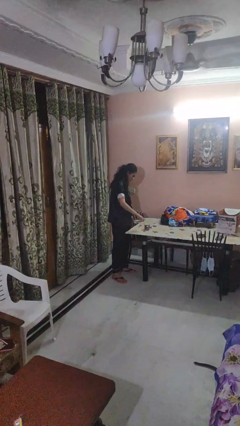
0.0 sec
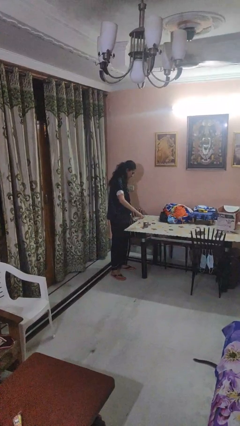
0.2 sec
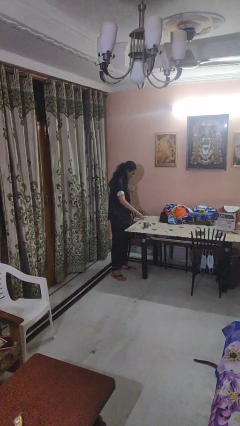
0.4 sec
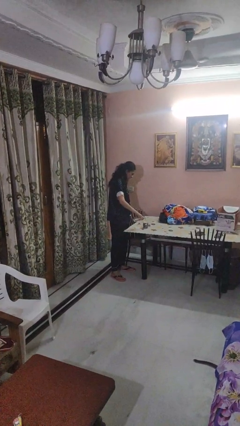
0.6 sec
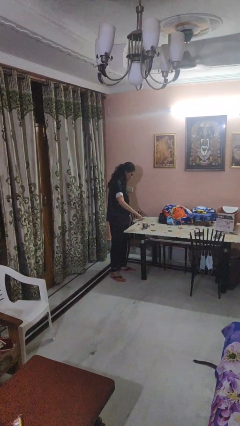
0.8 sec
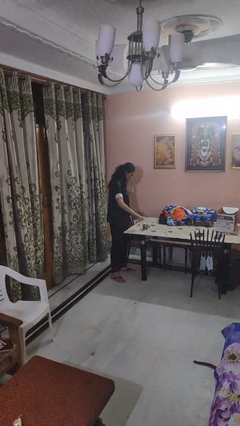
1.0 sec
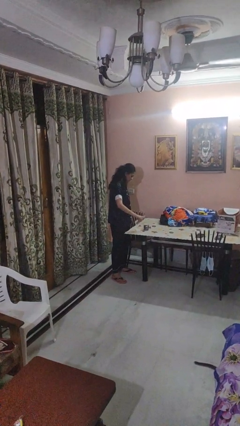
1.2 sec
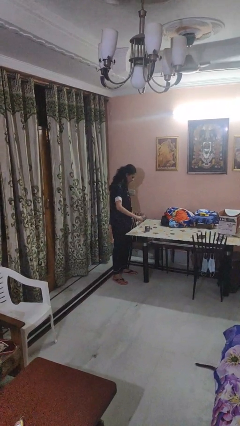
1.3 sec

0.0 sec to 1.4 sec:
person pours liquid into cup

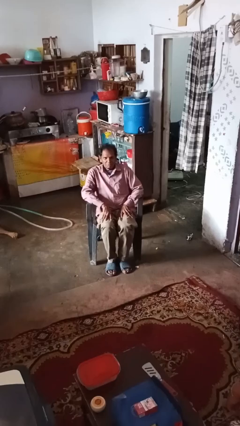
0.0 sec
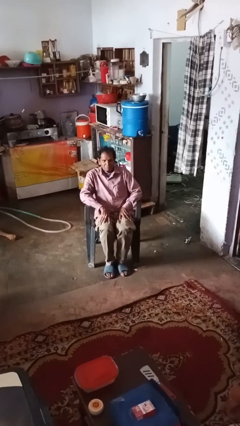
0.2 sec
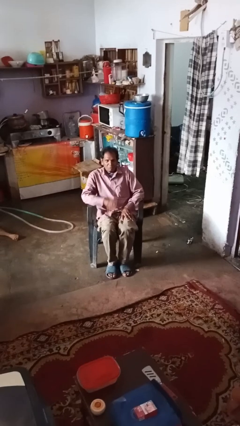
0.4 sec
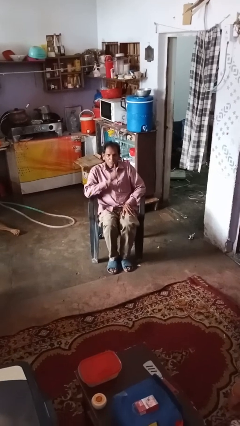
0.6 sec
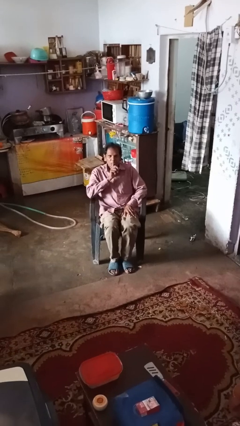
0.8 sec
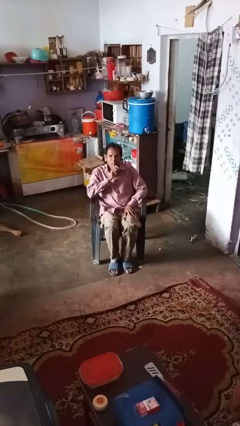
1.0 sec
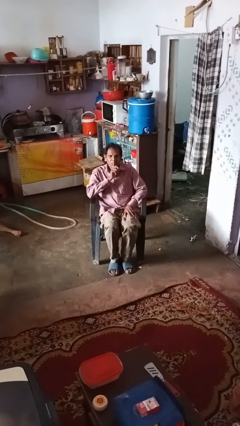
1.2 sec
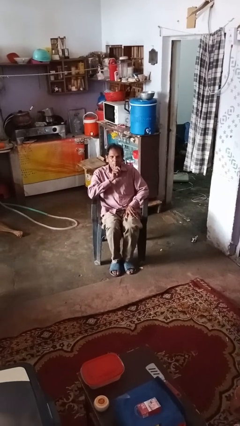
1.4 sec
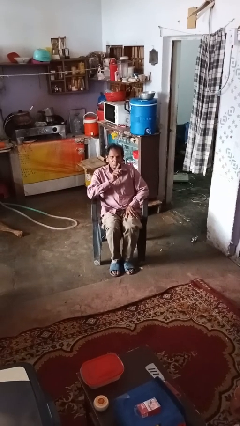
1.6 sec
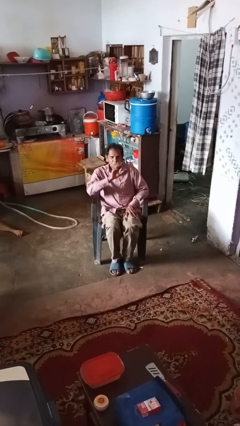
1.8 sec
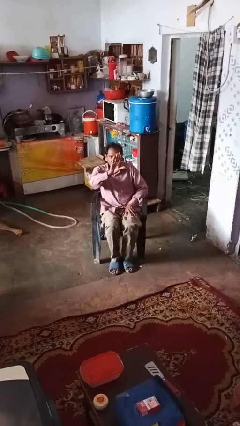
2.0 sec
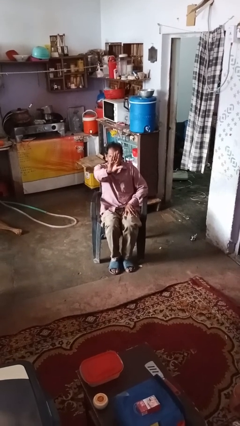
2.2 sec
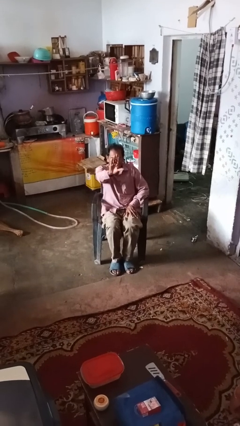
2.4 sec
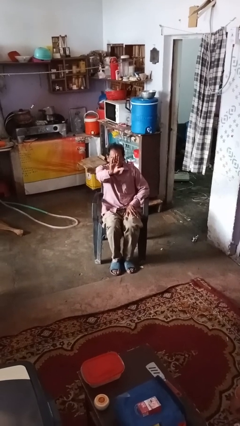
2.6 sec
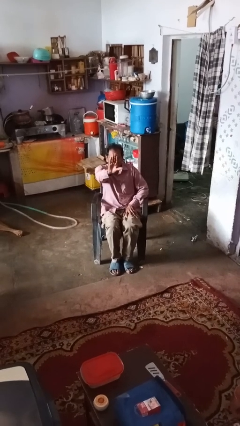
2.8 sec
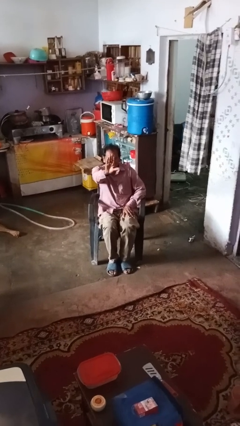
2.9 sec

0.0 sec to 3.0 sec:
person gestures be quiet

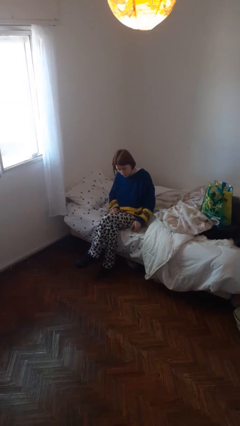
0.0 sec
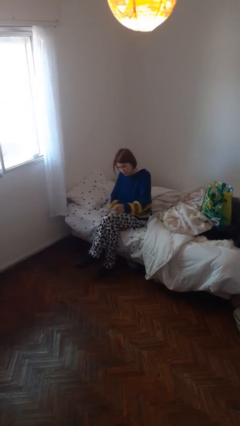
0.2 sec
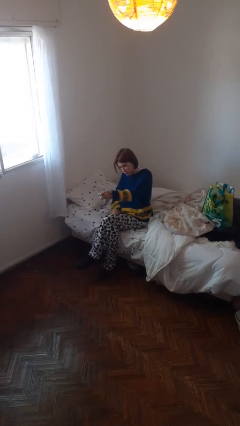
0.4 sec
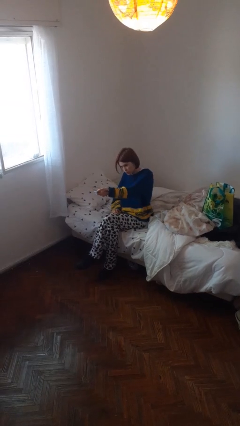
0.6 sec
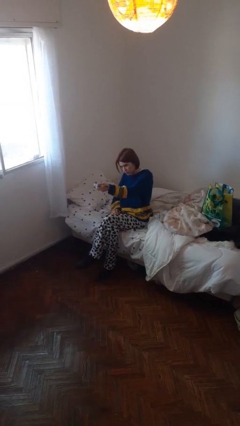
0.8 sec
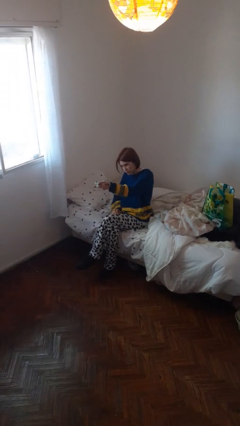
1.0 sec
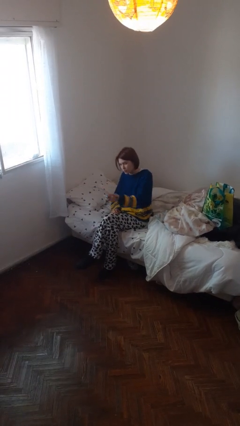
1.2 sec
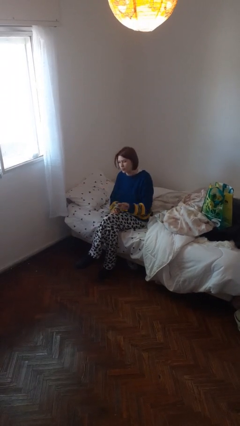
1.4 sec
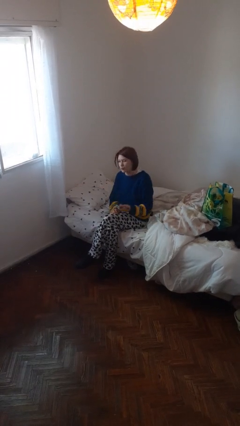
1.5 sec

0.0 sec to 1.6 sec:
person uses television remote

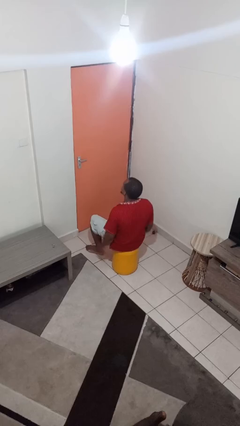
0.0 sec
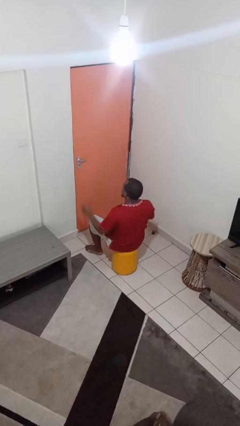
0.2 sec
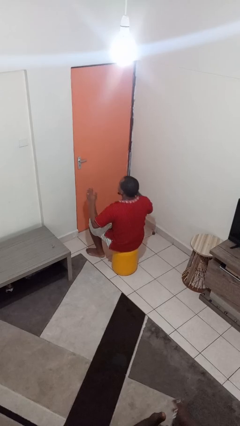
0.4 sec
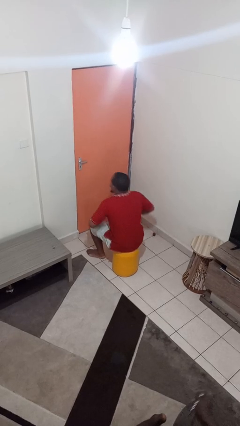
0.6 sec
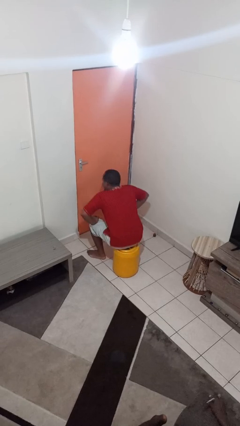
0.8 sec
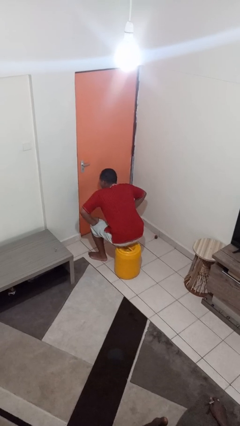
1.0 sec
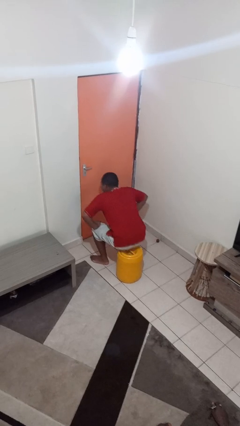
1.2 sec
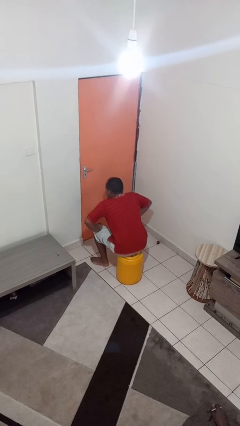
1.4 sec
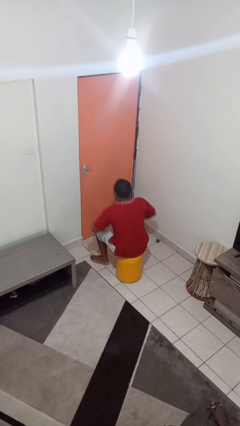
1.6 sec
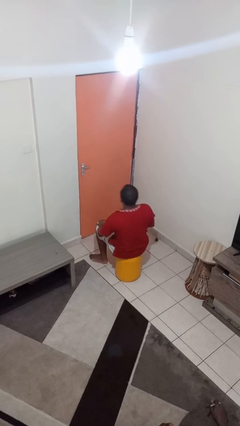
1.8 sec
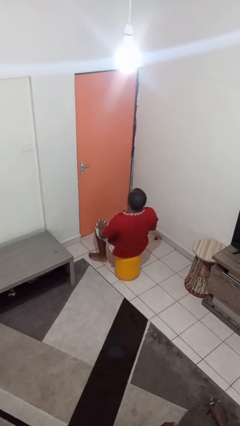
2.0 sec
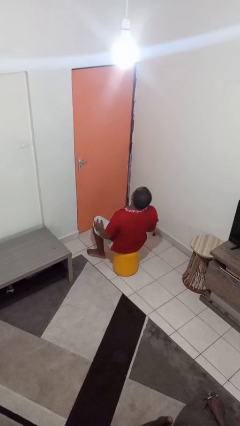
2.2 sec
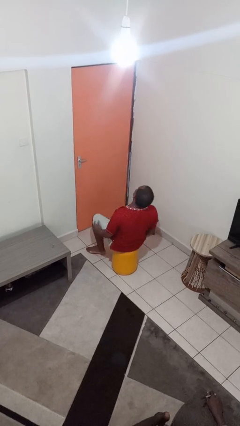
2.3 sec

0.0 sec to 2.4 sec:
person slaps hands on thighs

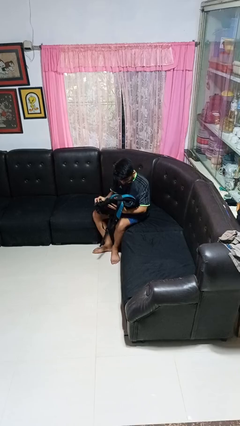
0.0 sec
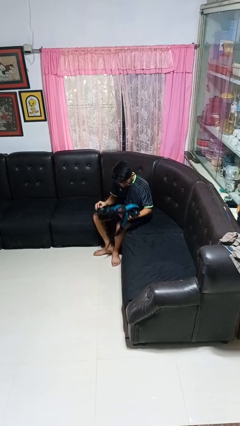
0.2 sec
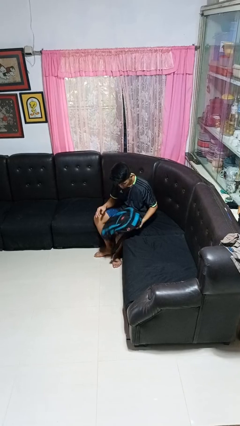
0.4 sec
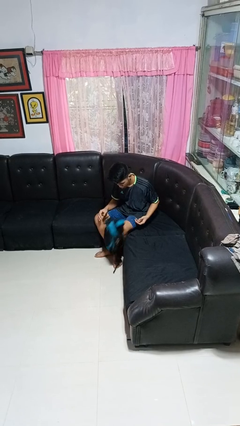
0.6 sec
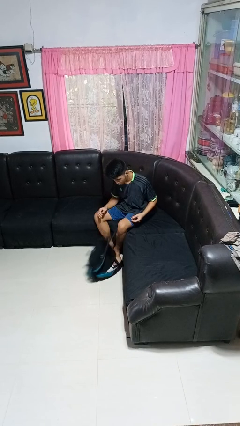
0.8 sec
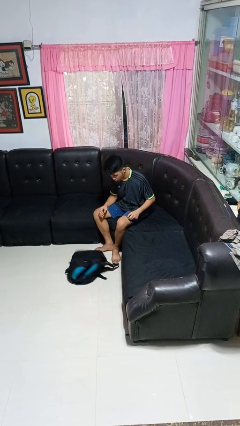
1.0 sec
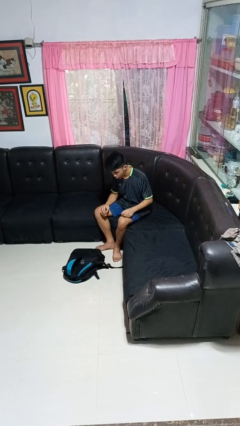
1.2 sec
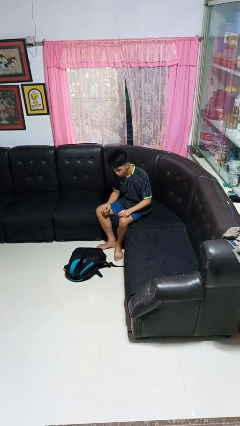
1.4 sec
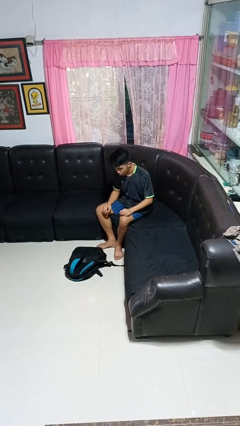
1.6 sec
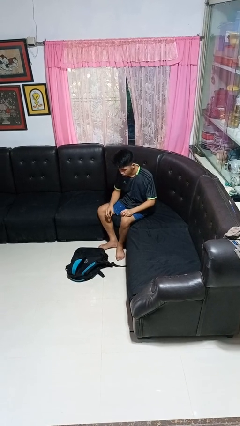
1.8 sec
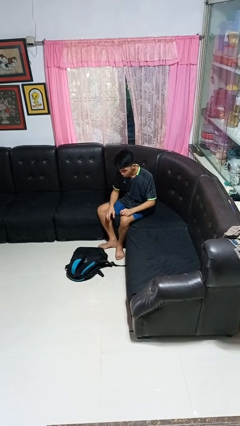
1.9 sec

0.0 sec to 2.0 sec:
person drops object

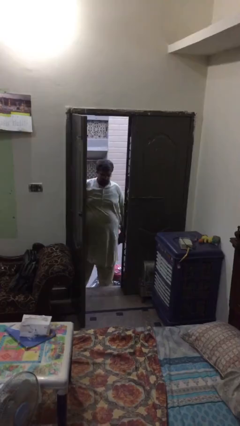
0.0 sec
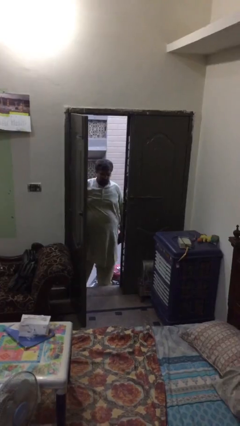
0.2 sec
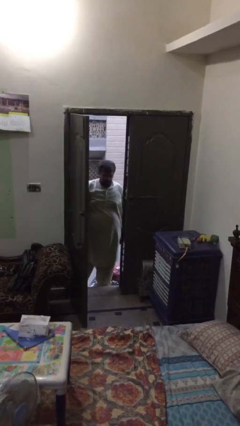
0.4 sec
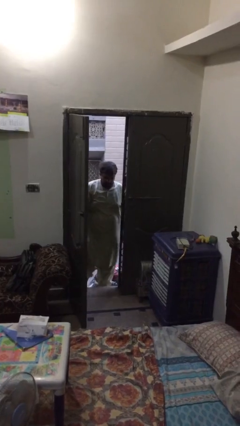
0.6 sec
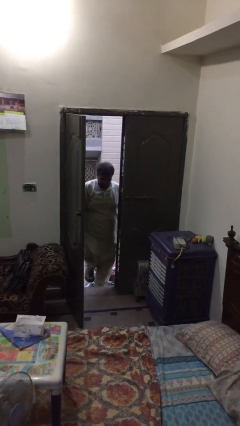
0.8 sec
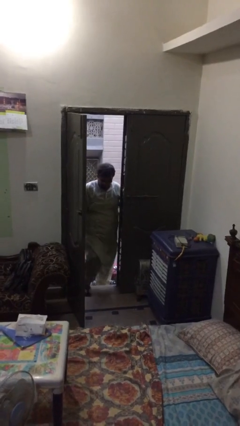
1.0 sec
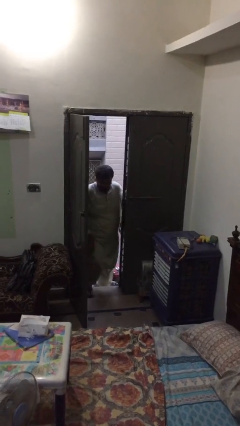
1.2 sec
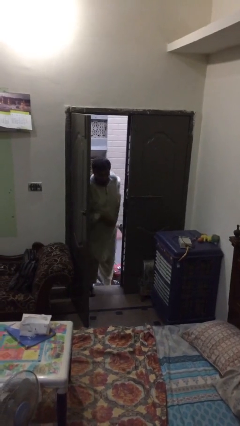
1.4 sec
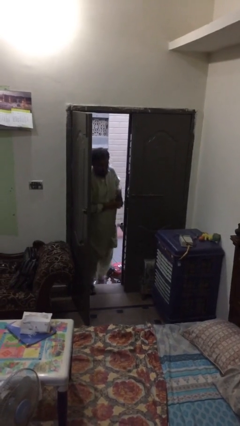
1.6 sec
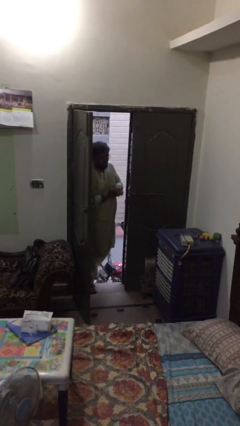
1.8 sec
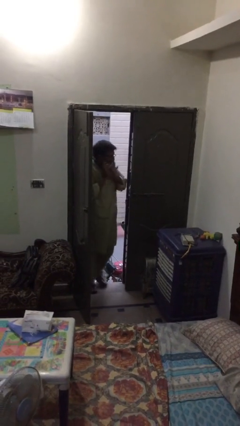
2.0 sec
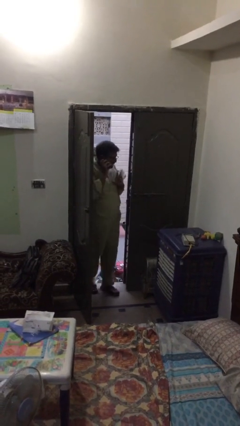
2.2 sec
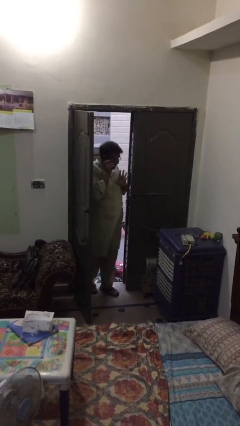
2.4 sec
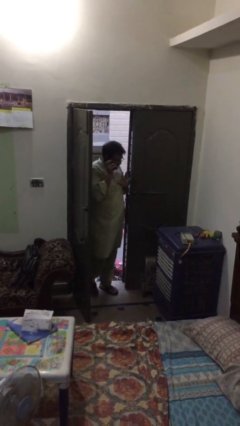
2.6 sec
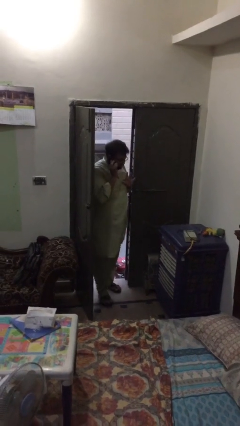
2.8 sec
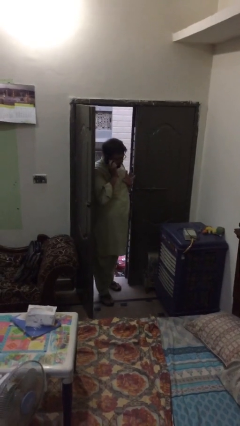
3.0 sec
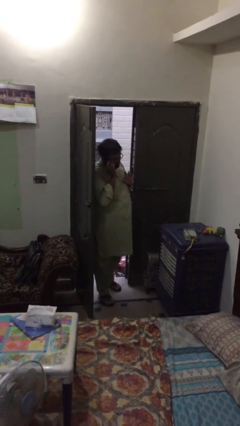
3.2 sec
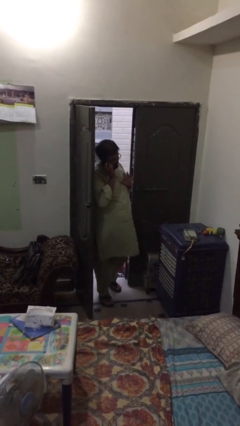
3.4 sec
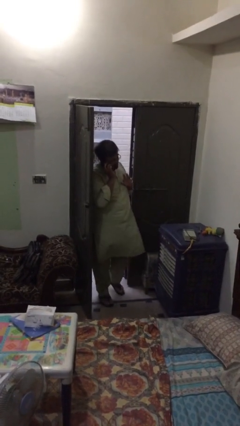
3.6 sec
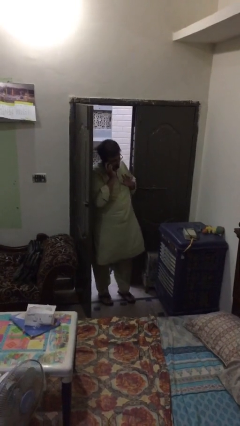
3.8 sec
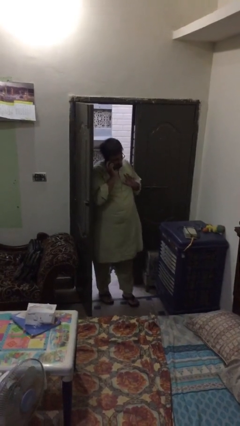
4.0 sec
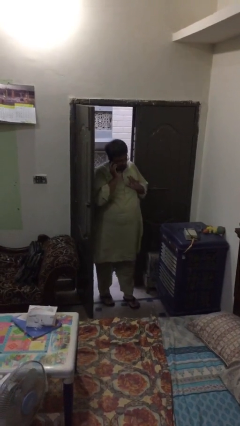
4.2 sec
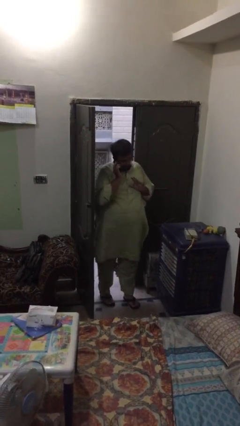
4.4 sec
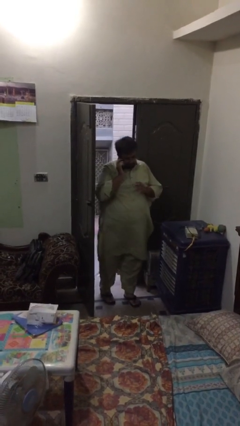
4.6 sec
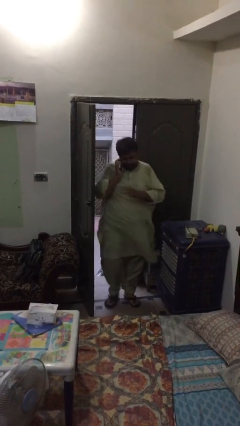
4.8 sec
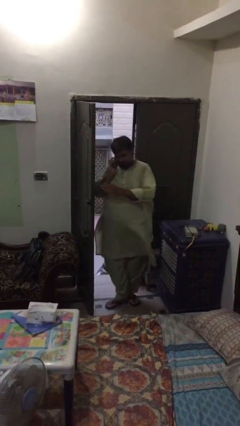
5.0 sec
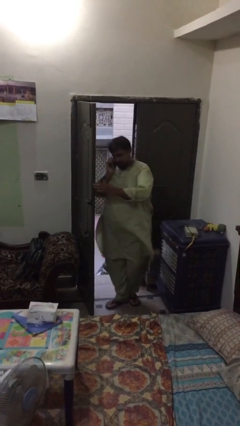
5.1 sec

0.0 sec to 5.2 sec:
person enters scene through structure

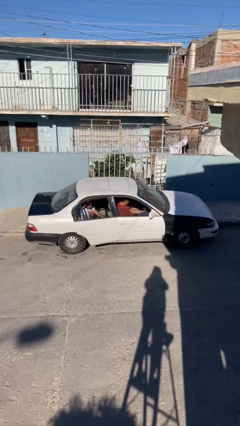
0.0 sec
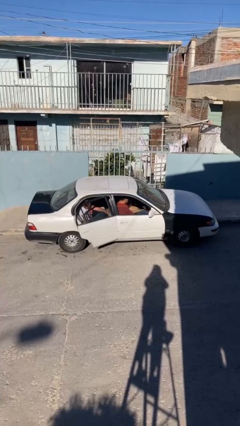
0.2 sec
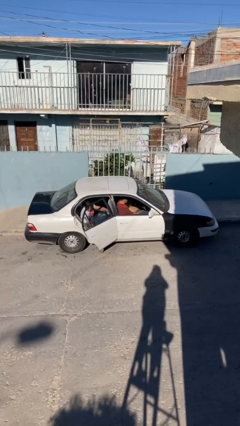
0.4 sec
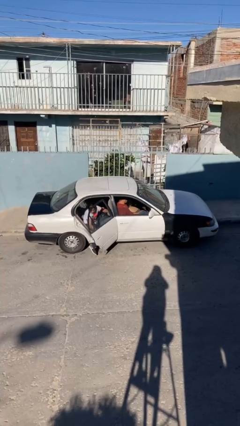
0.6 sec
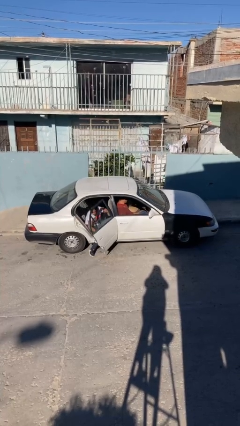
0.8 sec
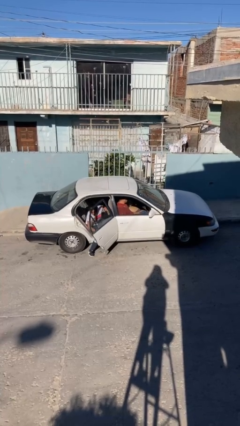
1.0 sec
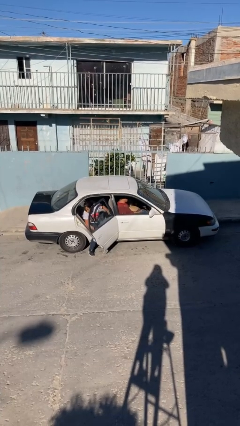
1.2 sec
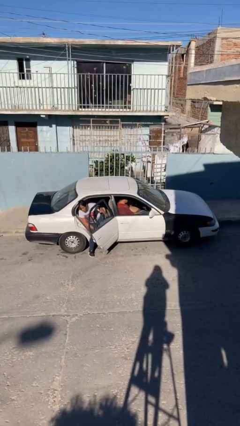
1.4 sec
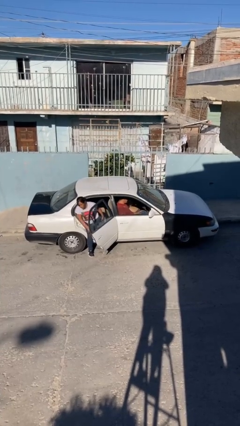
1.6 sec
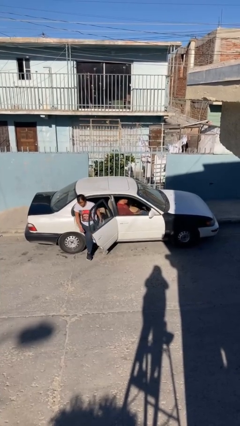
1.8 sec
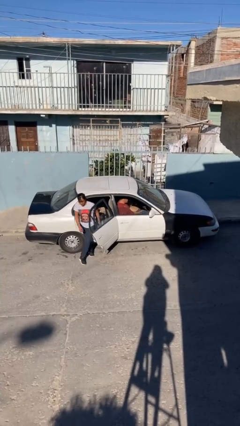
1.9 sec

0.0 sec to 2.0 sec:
car drops off person
